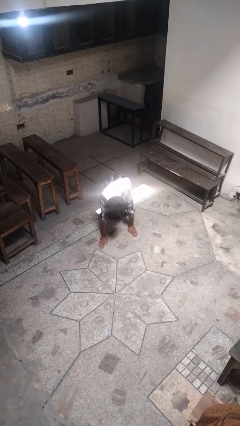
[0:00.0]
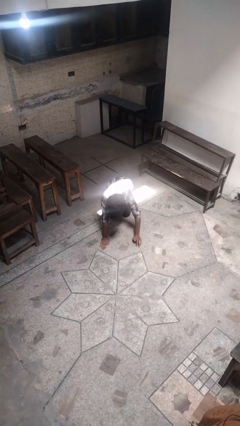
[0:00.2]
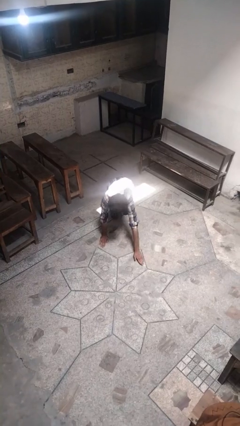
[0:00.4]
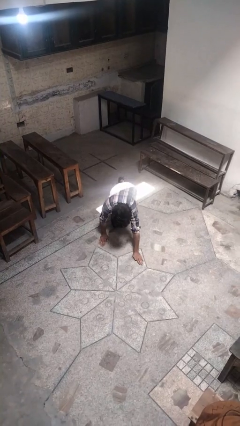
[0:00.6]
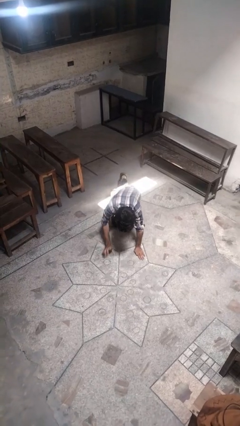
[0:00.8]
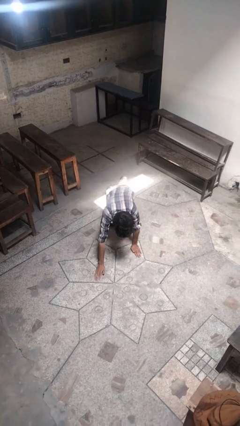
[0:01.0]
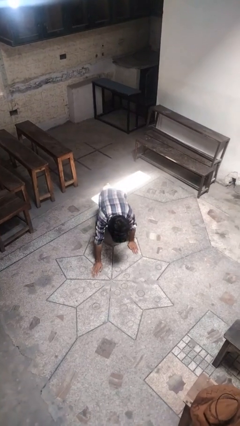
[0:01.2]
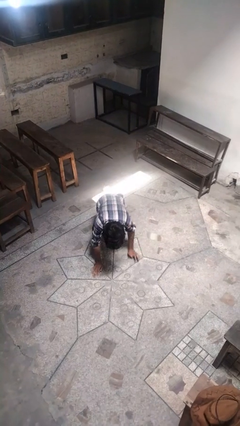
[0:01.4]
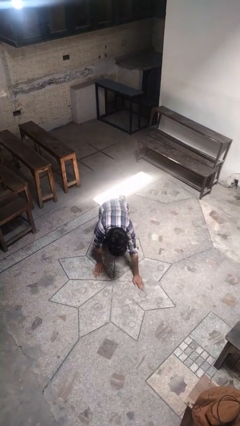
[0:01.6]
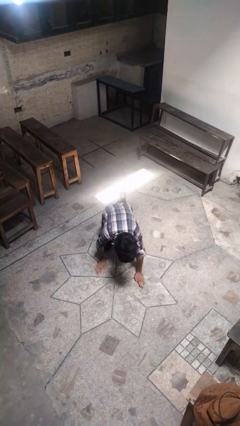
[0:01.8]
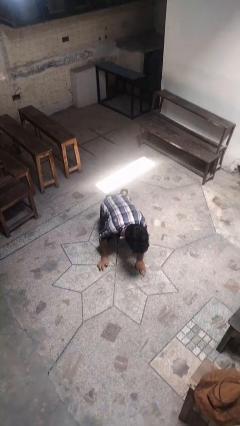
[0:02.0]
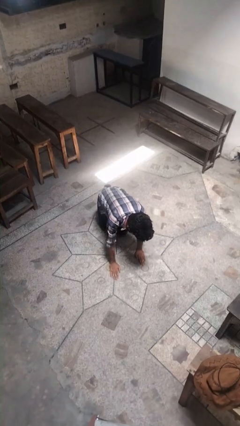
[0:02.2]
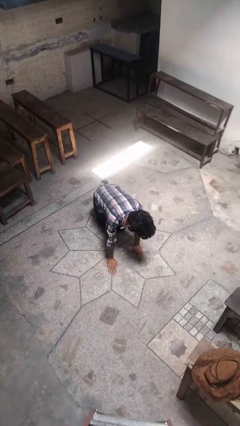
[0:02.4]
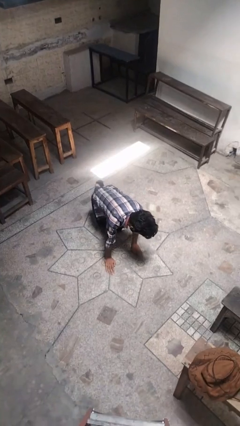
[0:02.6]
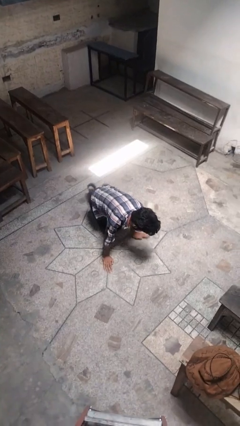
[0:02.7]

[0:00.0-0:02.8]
person crawls

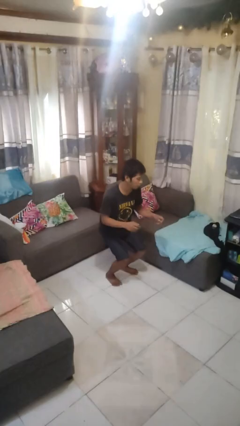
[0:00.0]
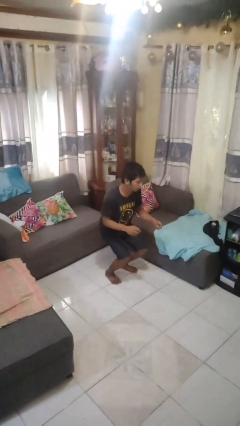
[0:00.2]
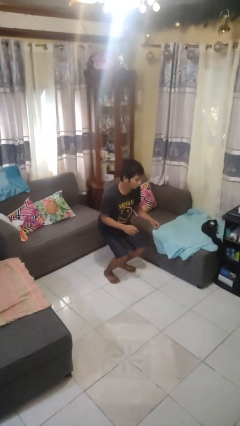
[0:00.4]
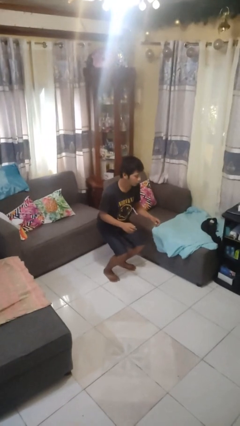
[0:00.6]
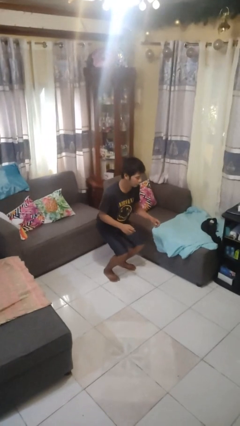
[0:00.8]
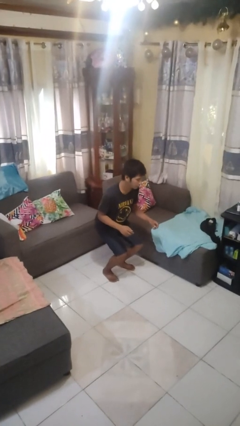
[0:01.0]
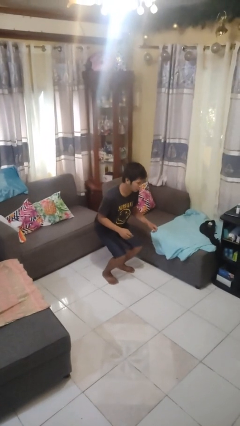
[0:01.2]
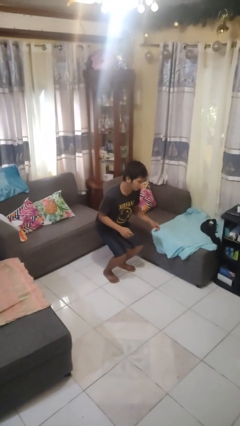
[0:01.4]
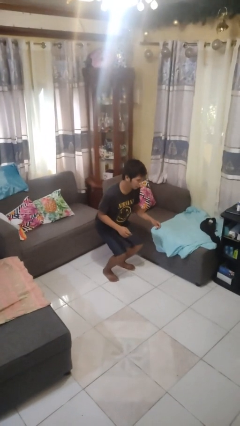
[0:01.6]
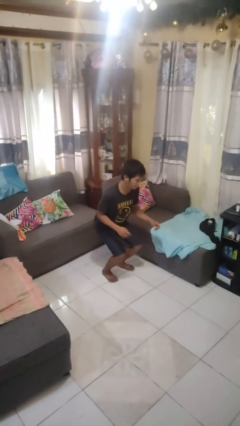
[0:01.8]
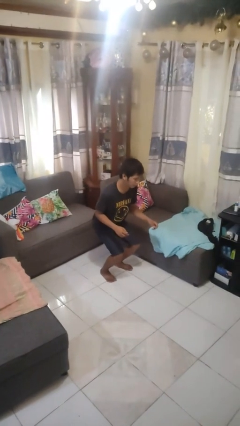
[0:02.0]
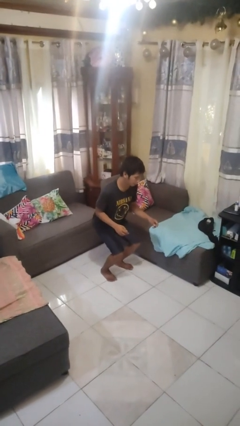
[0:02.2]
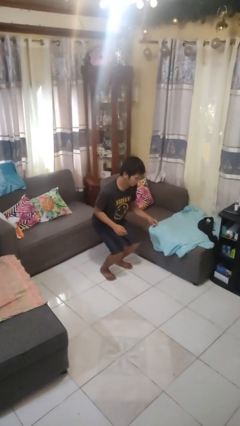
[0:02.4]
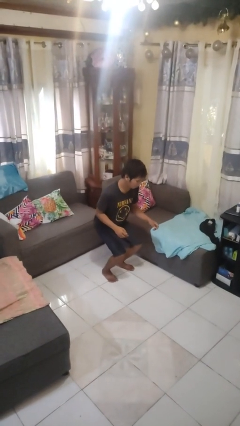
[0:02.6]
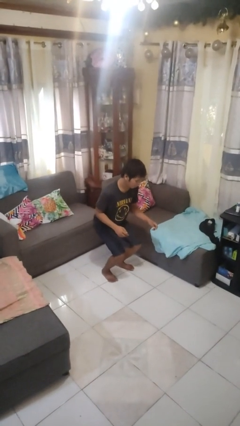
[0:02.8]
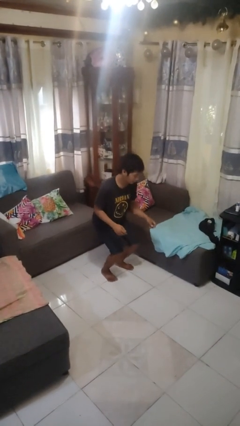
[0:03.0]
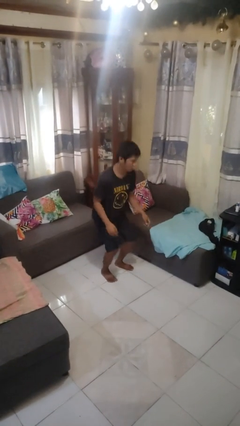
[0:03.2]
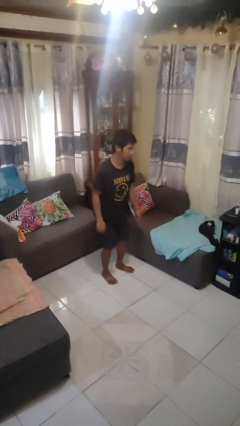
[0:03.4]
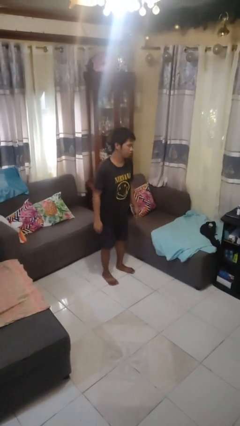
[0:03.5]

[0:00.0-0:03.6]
person squats

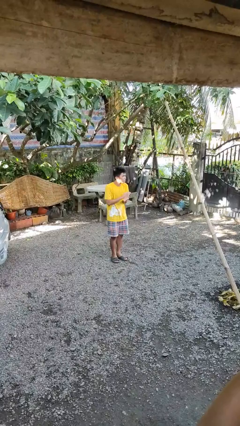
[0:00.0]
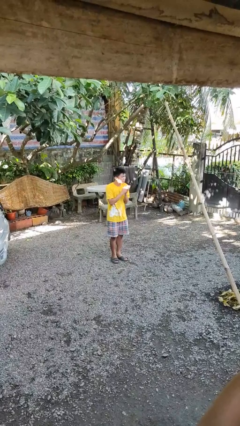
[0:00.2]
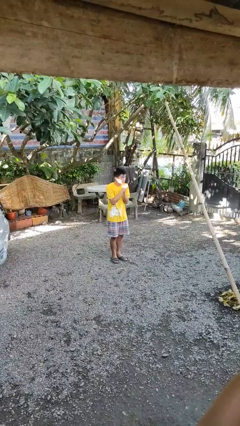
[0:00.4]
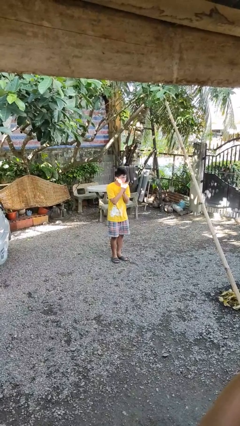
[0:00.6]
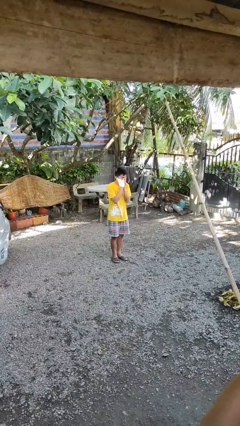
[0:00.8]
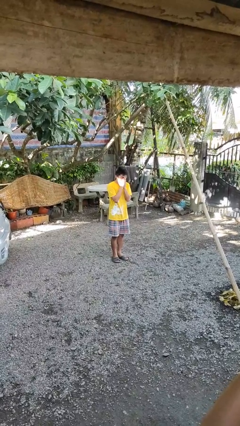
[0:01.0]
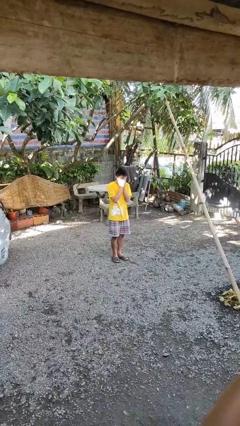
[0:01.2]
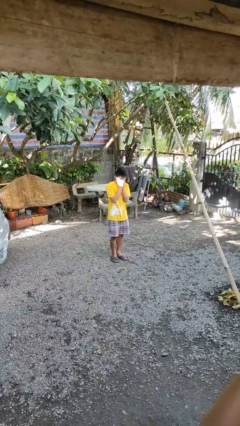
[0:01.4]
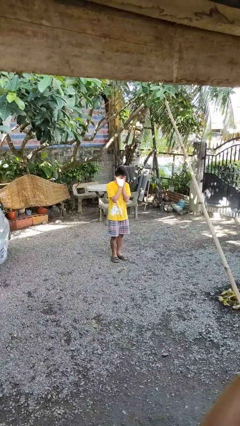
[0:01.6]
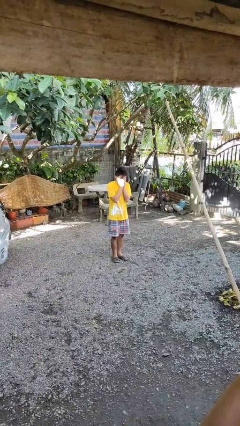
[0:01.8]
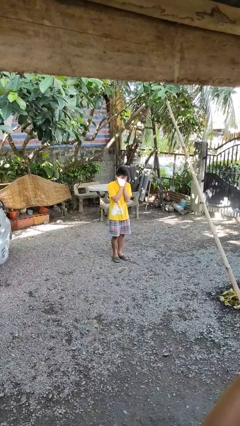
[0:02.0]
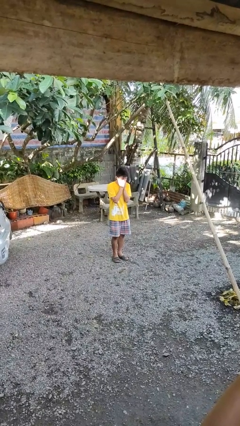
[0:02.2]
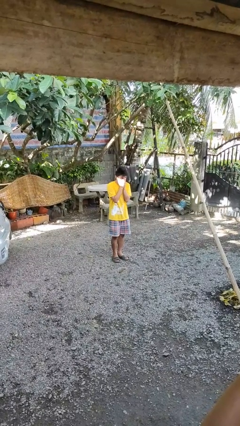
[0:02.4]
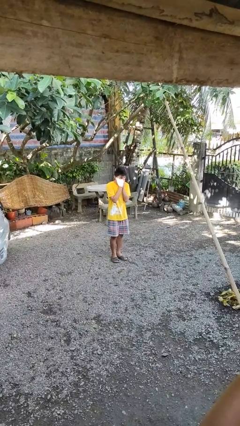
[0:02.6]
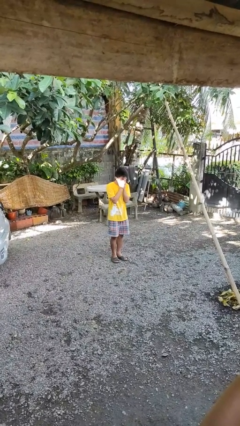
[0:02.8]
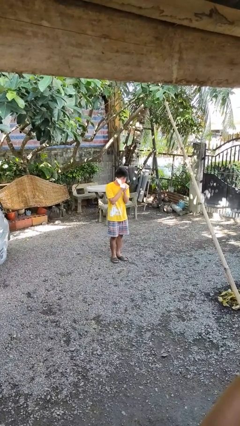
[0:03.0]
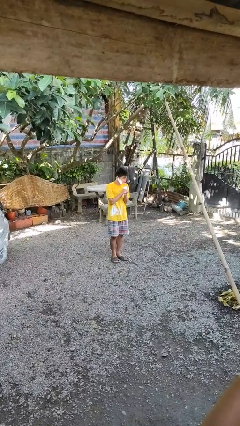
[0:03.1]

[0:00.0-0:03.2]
person blows into hands

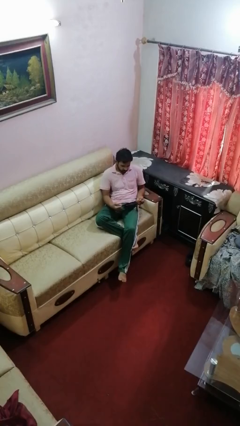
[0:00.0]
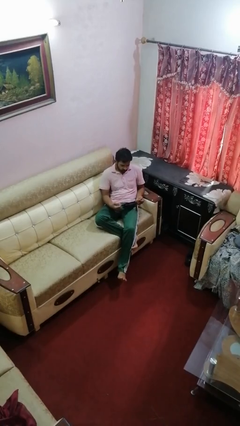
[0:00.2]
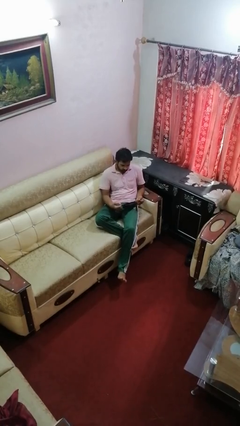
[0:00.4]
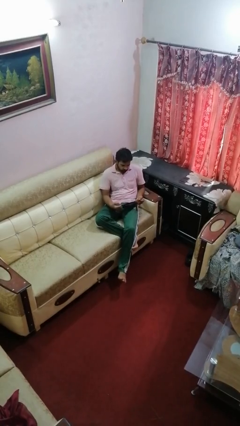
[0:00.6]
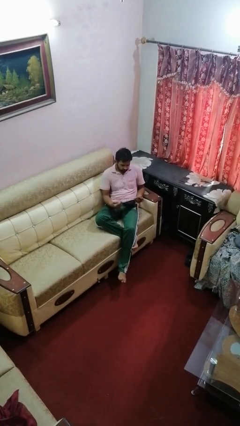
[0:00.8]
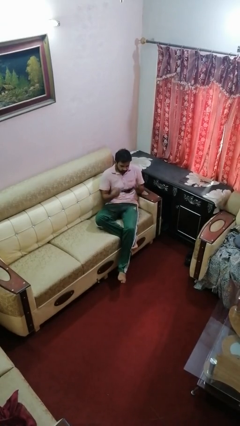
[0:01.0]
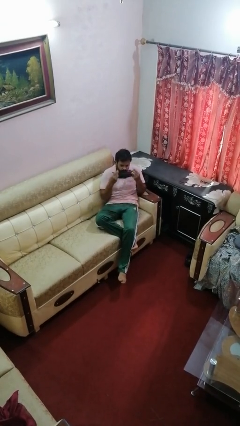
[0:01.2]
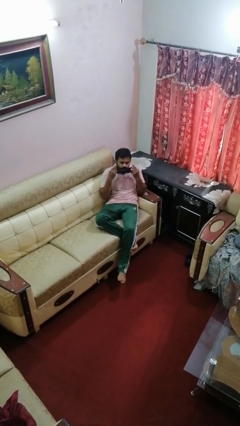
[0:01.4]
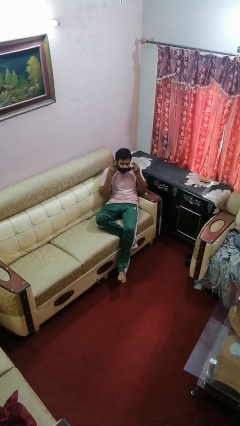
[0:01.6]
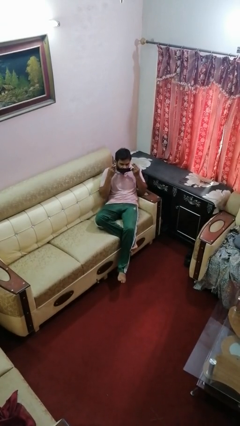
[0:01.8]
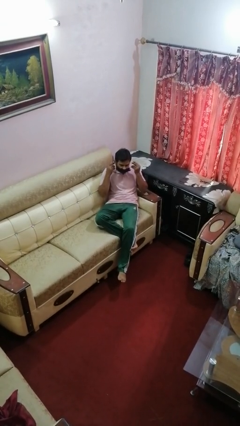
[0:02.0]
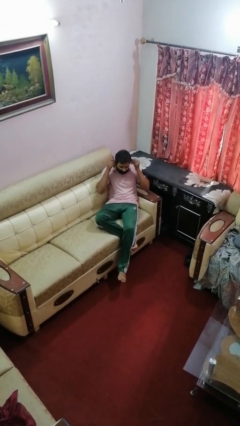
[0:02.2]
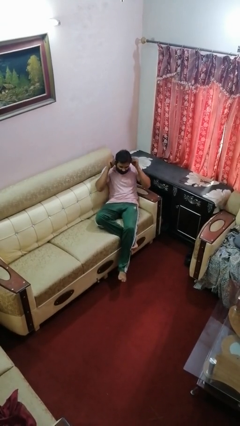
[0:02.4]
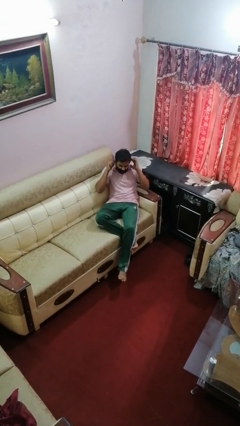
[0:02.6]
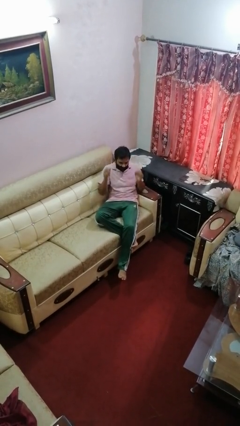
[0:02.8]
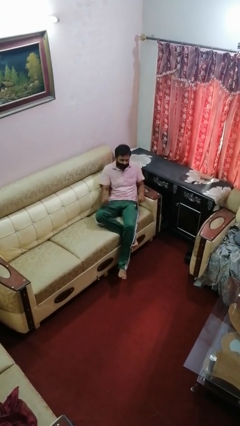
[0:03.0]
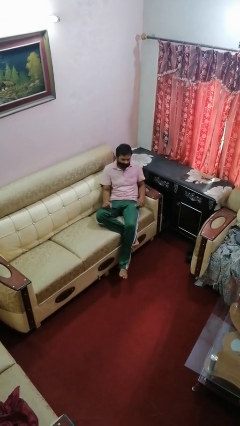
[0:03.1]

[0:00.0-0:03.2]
person puts on facemask

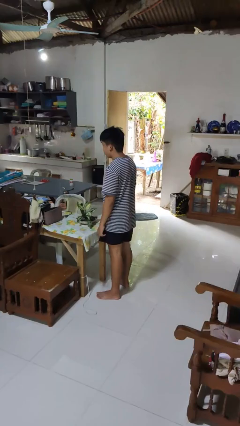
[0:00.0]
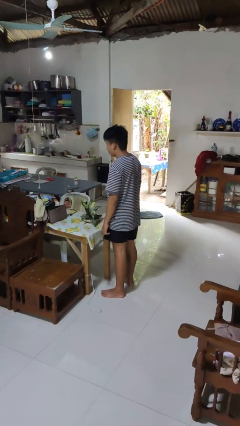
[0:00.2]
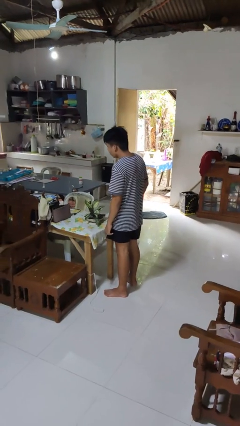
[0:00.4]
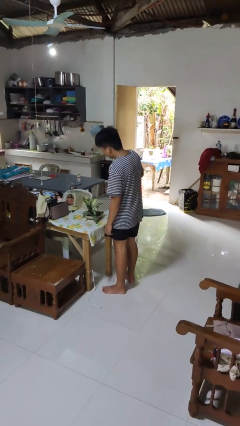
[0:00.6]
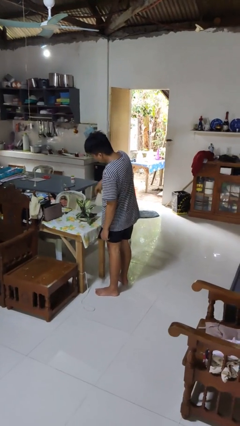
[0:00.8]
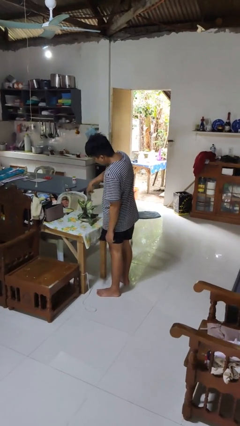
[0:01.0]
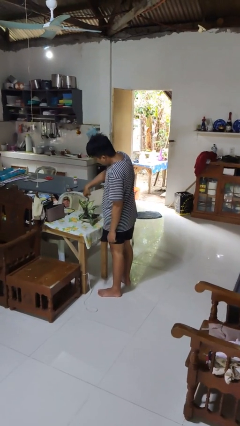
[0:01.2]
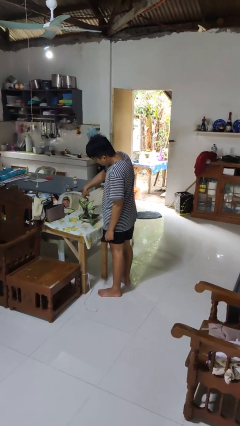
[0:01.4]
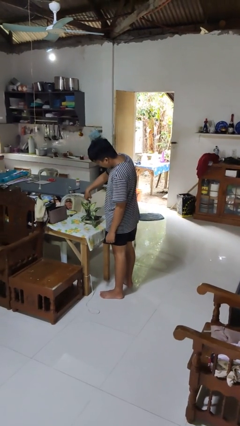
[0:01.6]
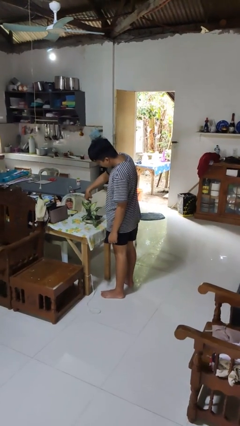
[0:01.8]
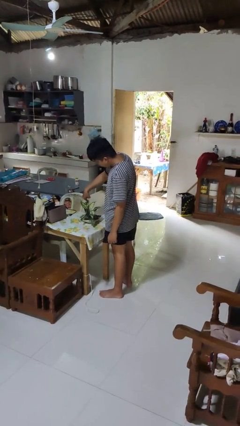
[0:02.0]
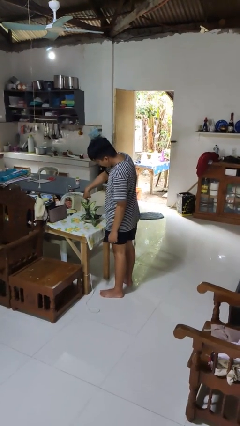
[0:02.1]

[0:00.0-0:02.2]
person waters houseplant

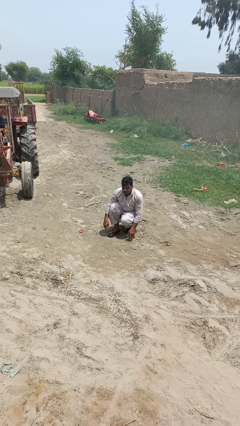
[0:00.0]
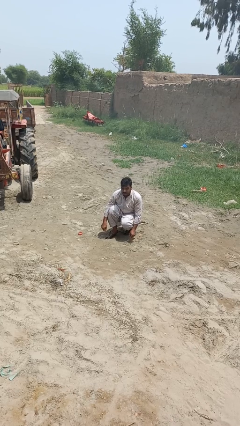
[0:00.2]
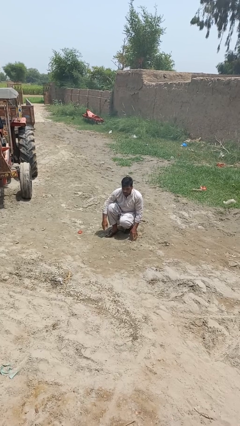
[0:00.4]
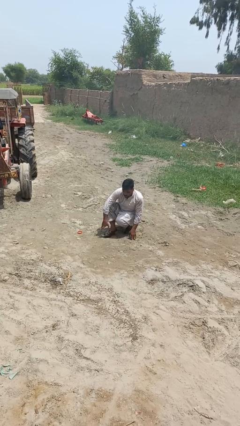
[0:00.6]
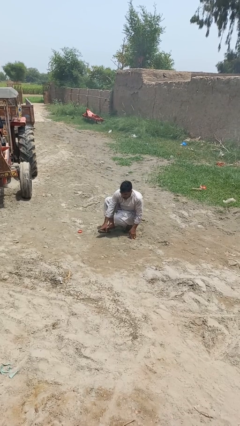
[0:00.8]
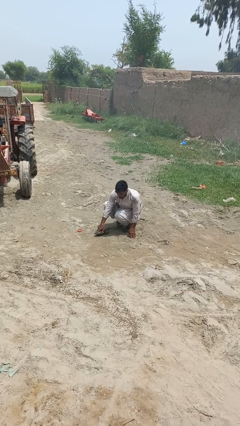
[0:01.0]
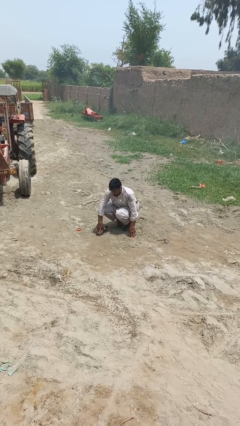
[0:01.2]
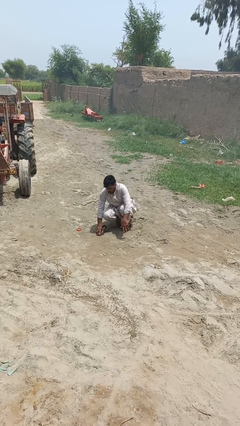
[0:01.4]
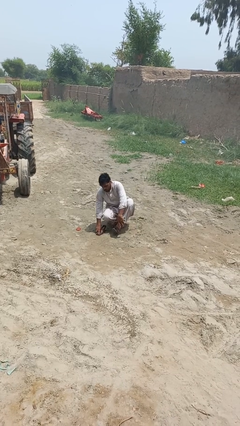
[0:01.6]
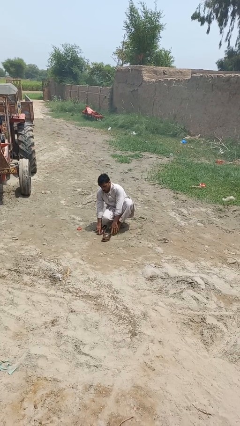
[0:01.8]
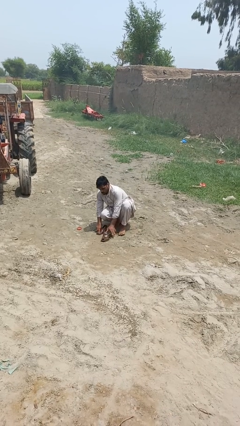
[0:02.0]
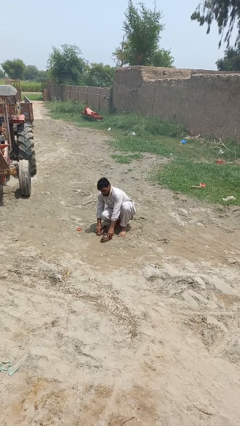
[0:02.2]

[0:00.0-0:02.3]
person takes off shoes
